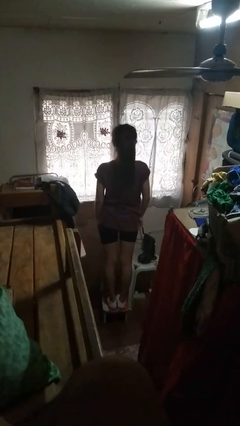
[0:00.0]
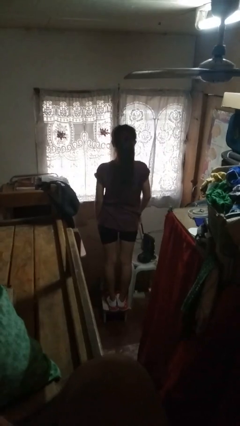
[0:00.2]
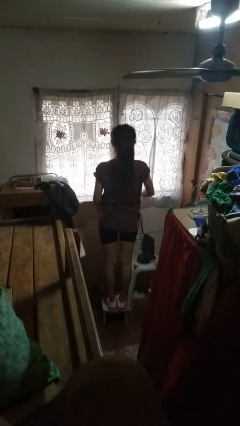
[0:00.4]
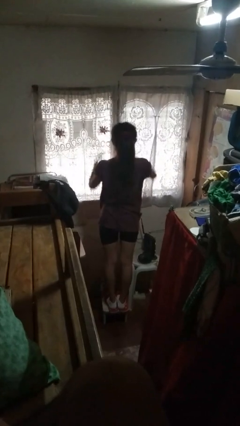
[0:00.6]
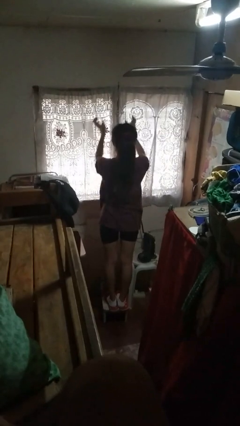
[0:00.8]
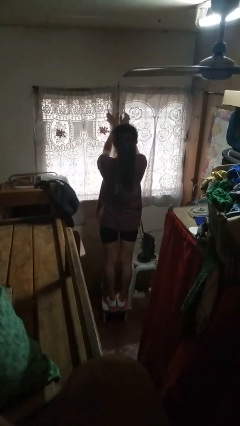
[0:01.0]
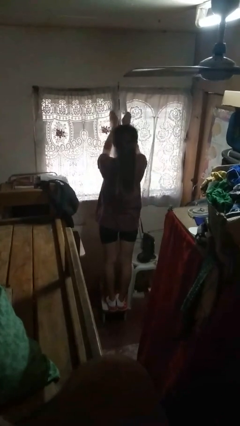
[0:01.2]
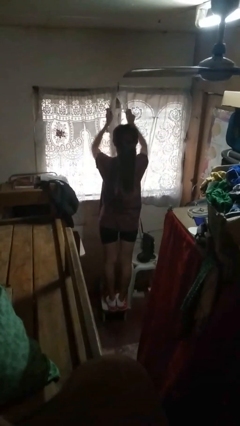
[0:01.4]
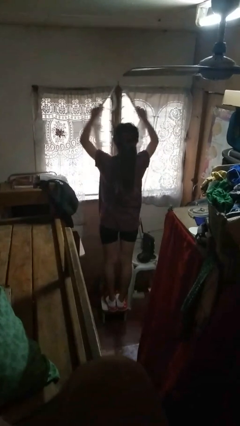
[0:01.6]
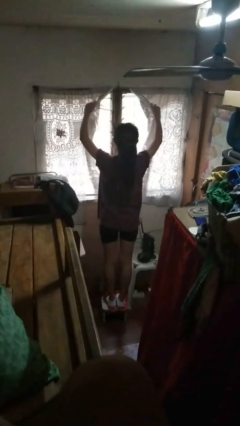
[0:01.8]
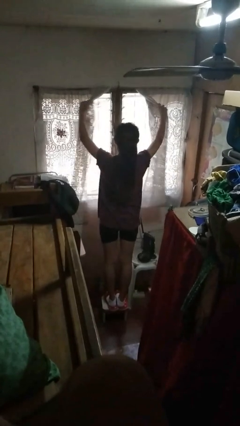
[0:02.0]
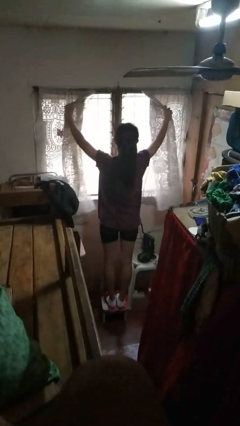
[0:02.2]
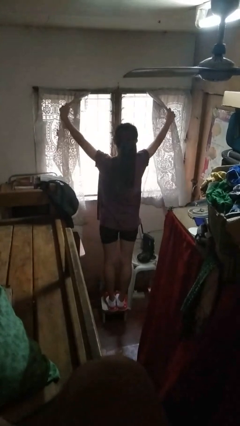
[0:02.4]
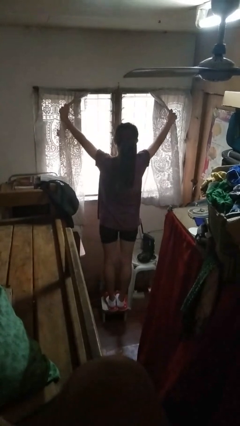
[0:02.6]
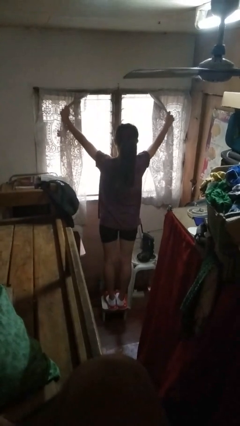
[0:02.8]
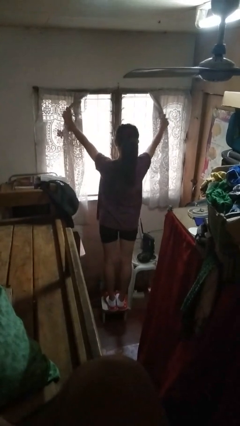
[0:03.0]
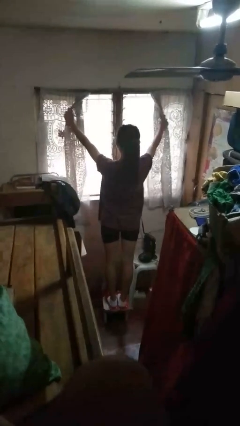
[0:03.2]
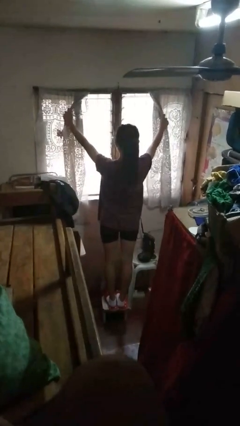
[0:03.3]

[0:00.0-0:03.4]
person opens curtains

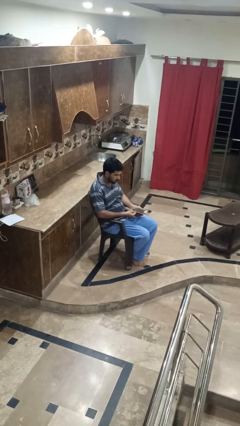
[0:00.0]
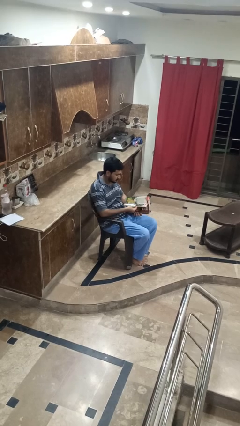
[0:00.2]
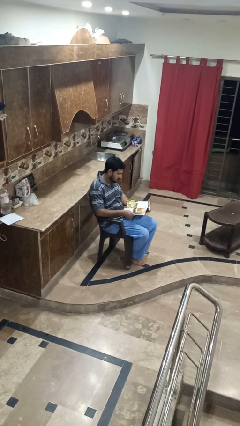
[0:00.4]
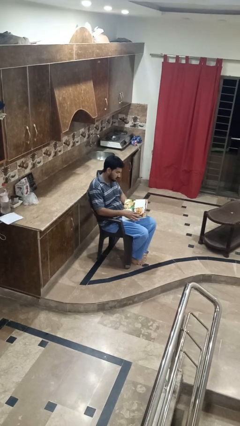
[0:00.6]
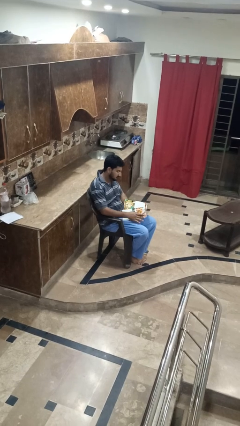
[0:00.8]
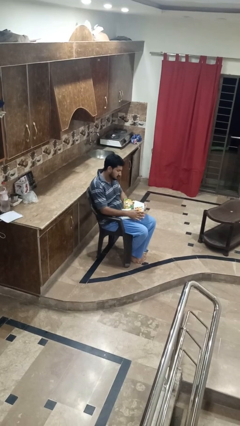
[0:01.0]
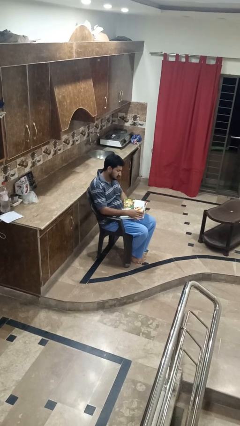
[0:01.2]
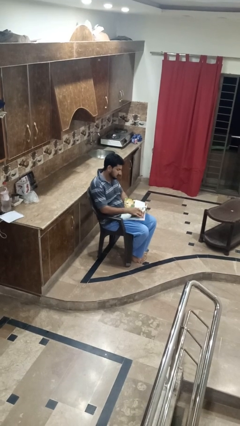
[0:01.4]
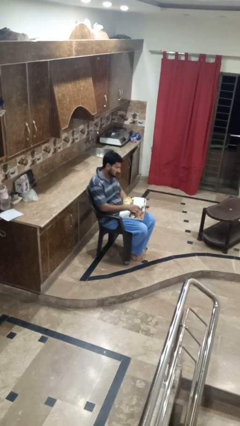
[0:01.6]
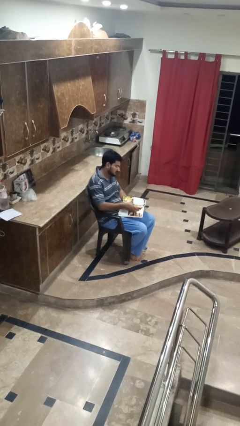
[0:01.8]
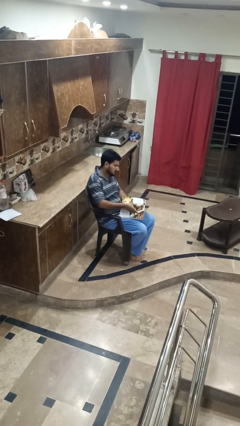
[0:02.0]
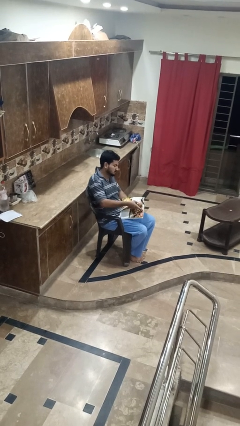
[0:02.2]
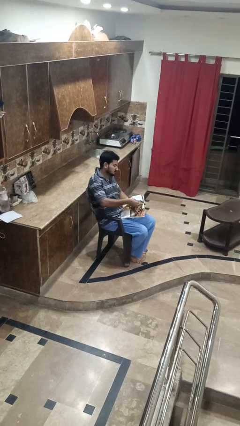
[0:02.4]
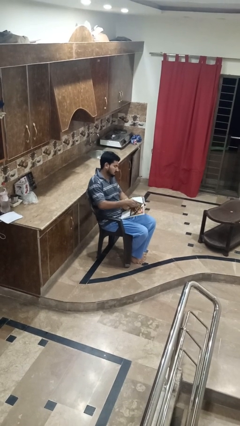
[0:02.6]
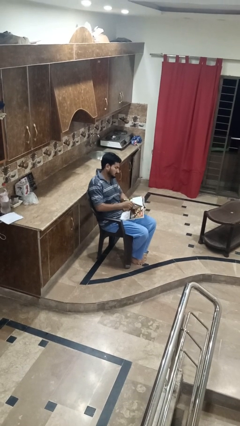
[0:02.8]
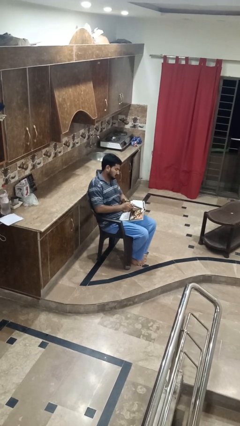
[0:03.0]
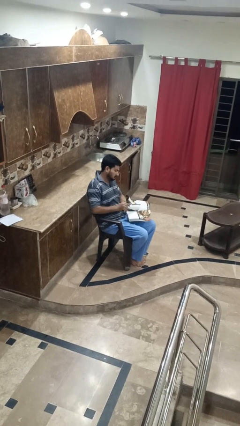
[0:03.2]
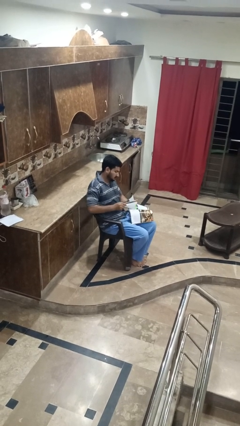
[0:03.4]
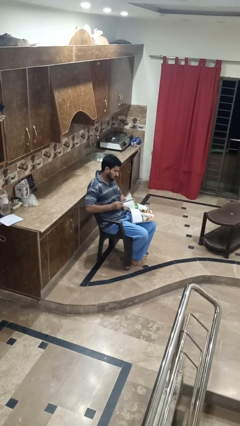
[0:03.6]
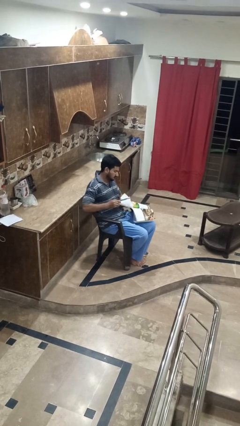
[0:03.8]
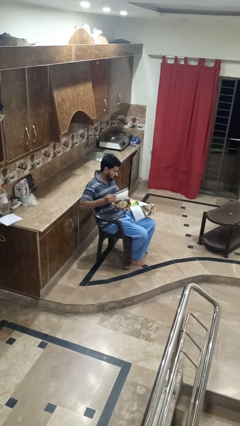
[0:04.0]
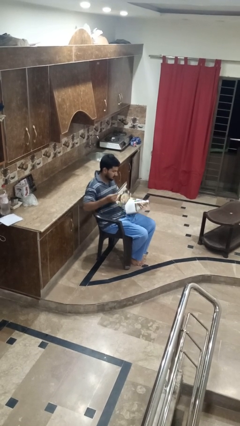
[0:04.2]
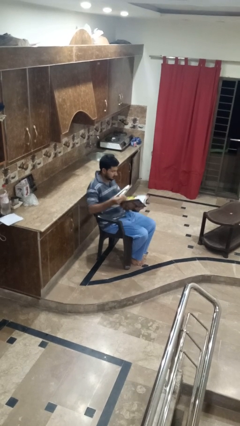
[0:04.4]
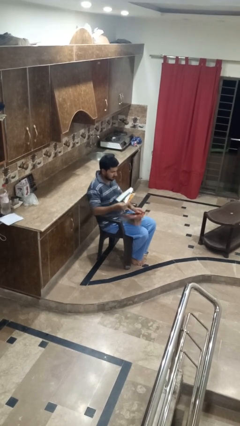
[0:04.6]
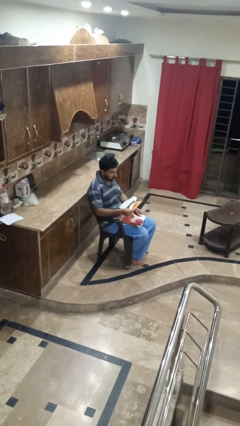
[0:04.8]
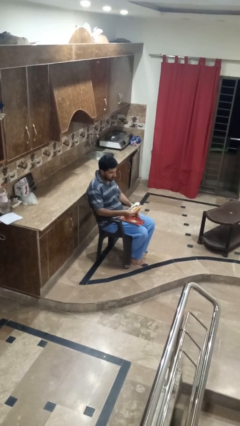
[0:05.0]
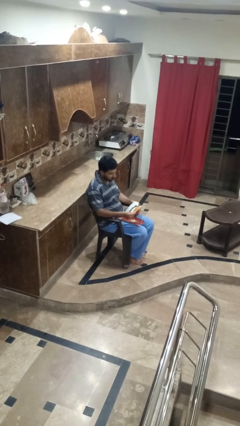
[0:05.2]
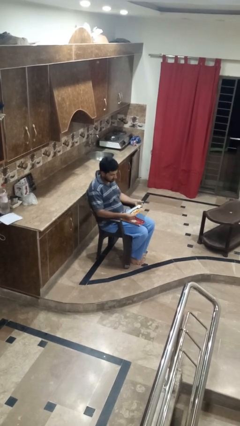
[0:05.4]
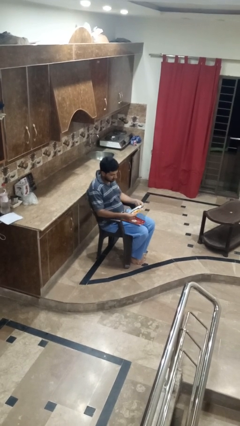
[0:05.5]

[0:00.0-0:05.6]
person tears paper

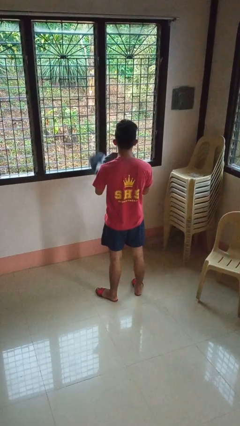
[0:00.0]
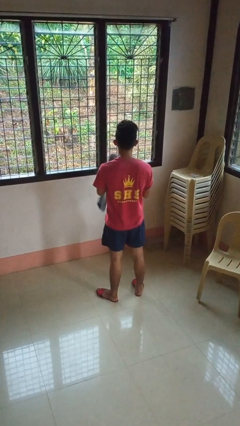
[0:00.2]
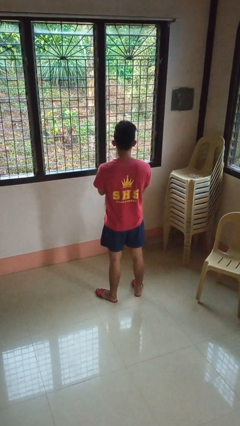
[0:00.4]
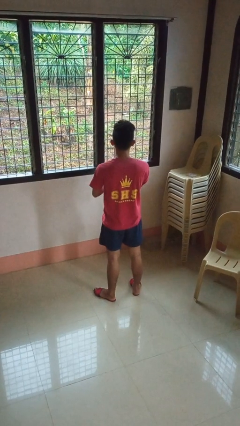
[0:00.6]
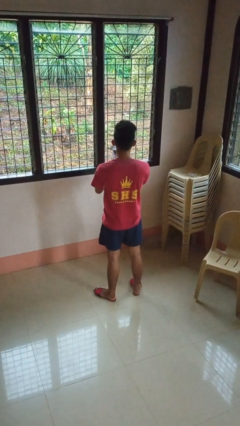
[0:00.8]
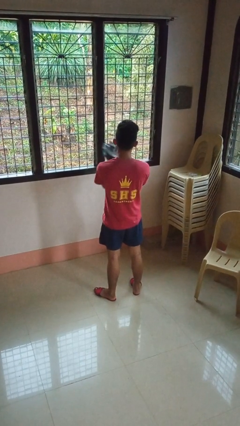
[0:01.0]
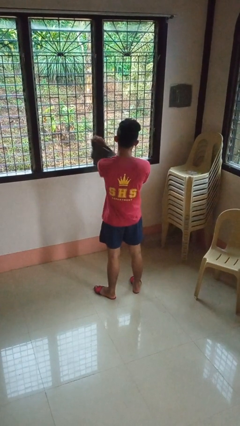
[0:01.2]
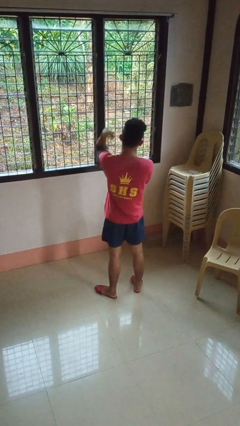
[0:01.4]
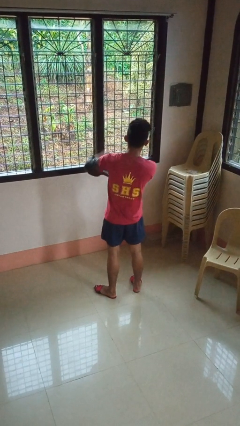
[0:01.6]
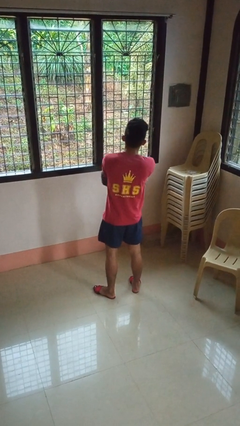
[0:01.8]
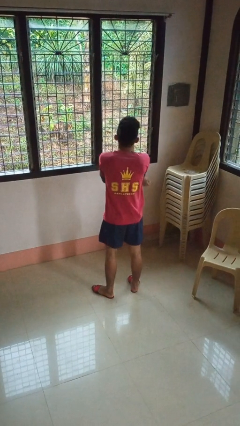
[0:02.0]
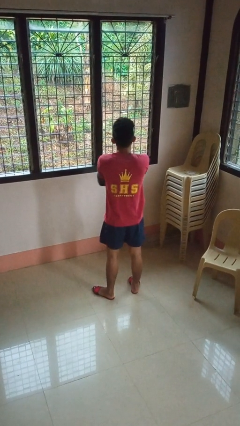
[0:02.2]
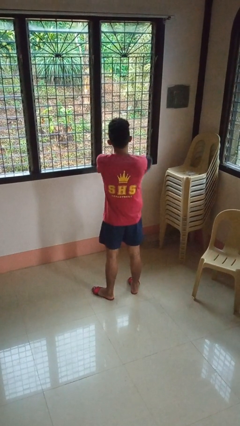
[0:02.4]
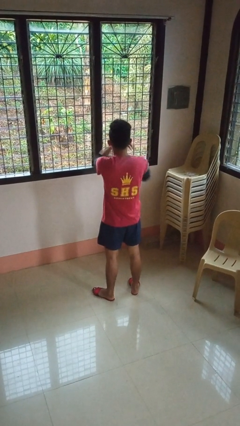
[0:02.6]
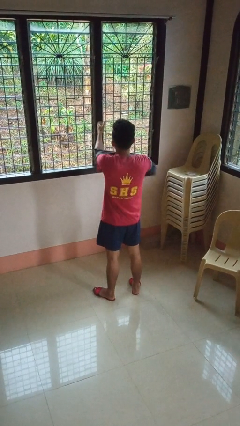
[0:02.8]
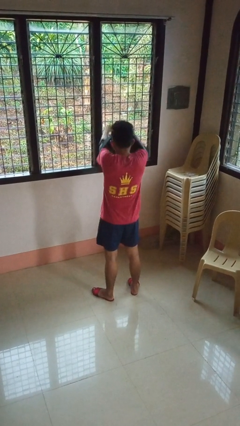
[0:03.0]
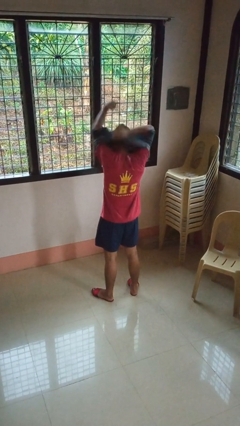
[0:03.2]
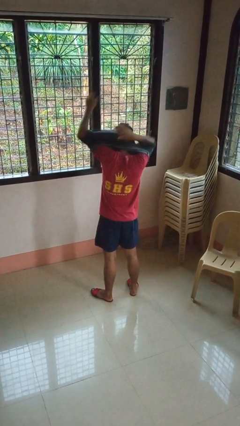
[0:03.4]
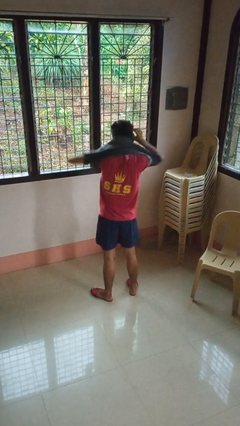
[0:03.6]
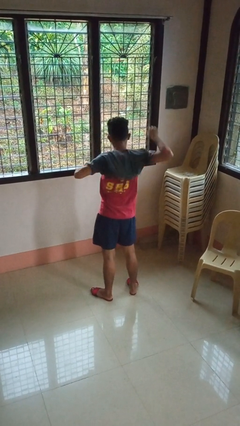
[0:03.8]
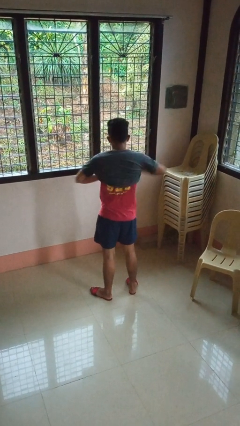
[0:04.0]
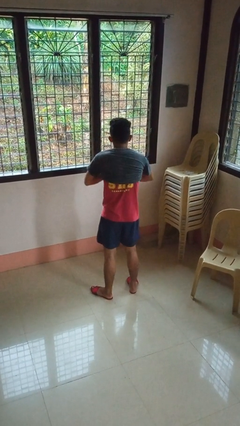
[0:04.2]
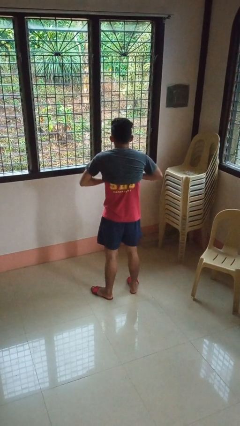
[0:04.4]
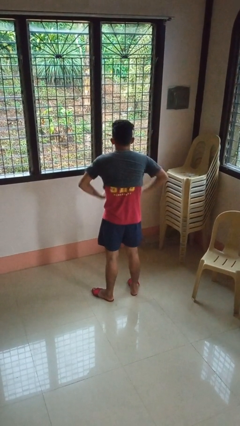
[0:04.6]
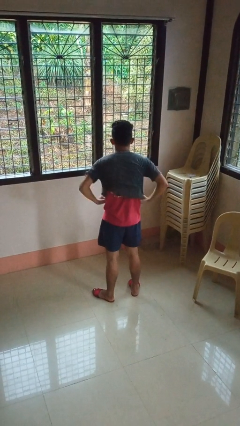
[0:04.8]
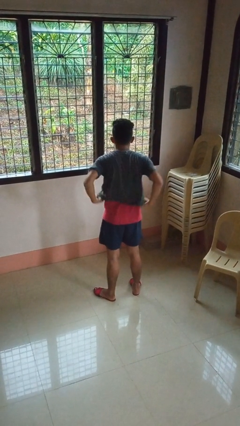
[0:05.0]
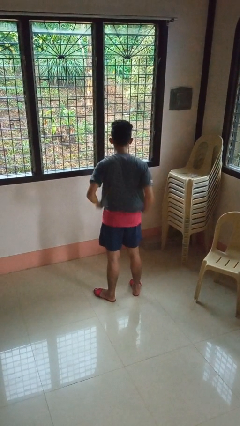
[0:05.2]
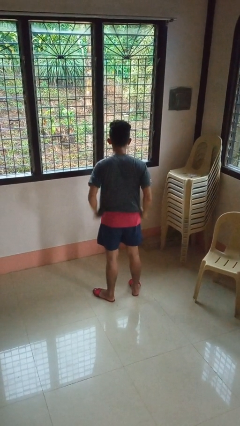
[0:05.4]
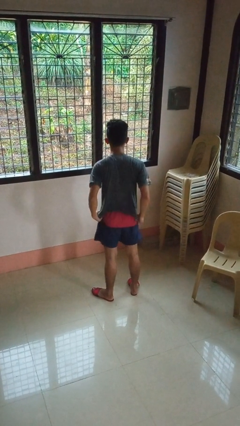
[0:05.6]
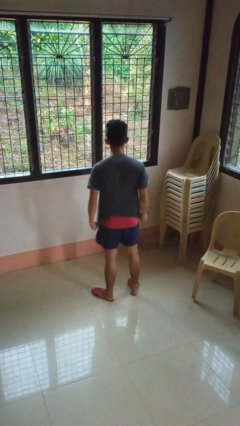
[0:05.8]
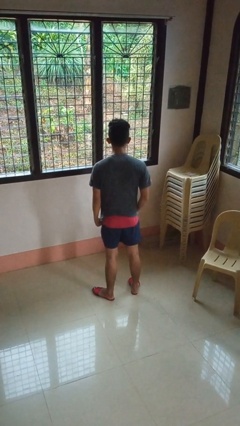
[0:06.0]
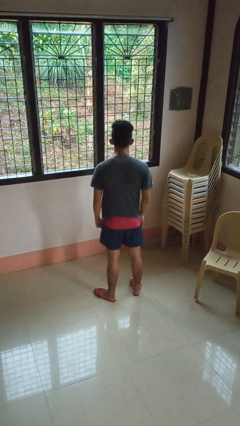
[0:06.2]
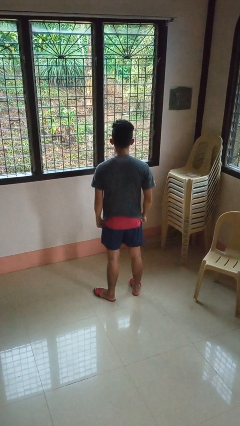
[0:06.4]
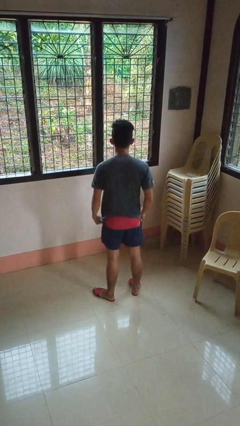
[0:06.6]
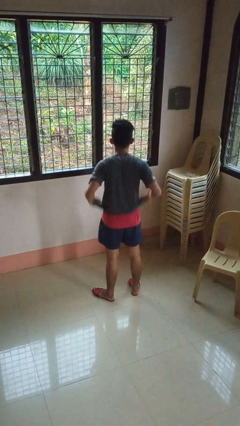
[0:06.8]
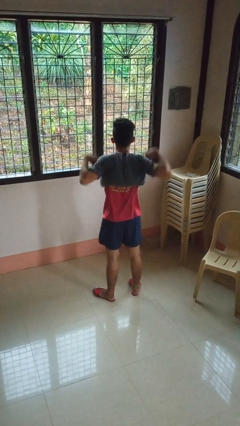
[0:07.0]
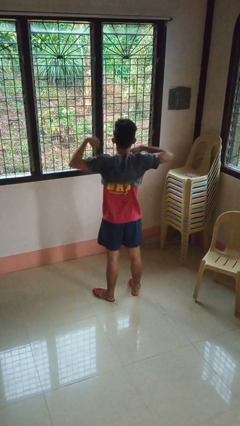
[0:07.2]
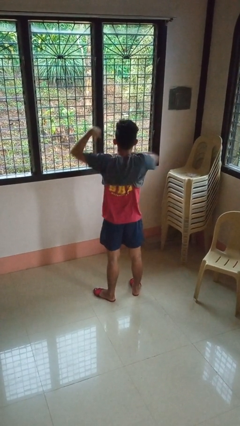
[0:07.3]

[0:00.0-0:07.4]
person puts on shirt

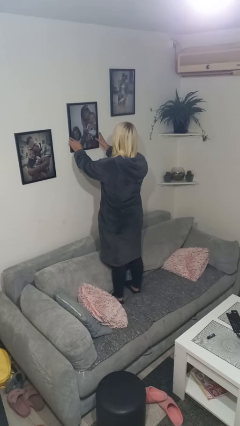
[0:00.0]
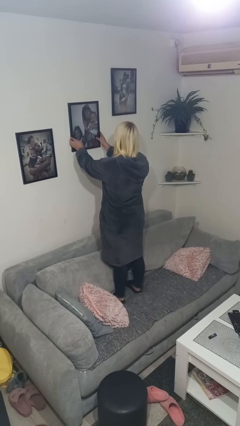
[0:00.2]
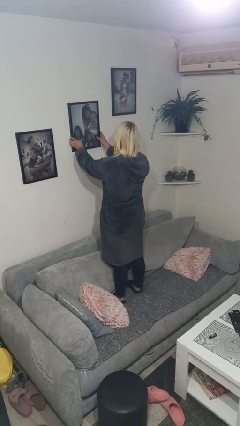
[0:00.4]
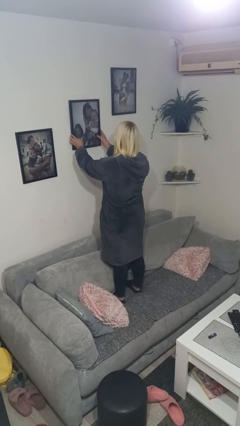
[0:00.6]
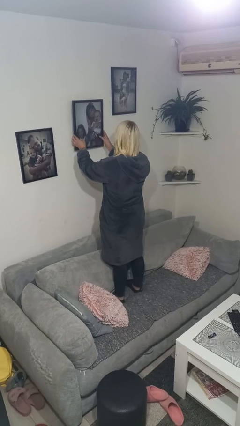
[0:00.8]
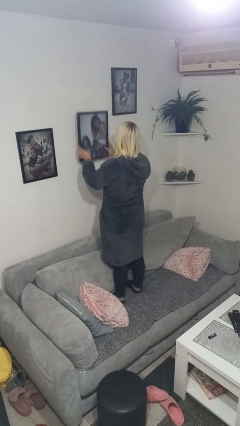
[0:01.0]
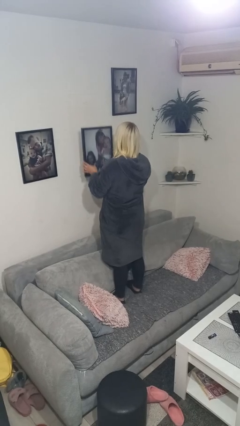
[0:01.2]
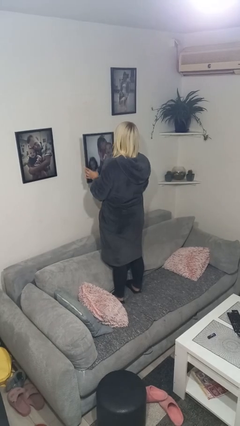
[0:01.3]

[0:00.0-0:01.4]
person takes down picture frame

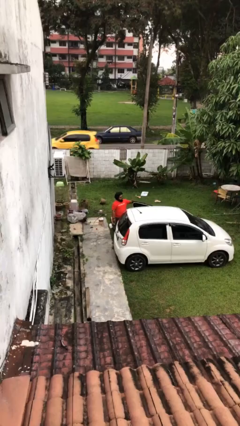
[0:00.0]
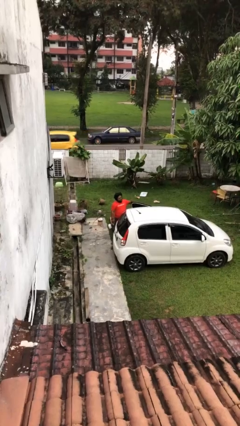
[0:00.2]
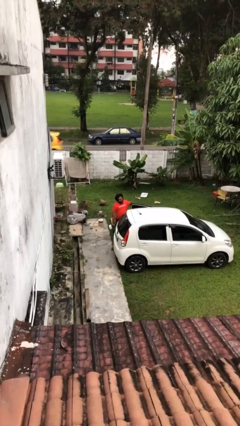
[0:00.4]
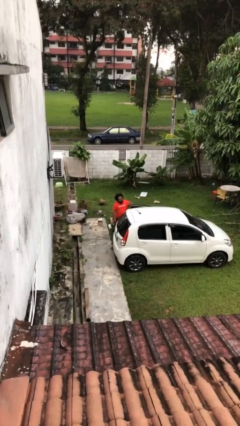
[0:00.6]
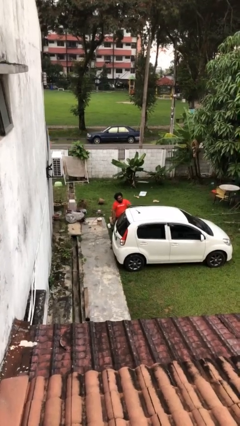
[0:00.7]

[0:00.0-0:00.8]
person closes car door
